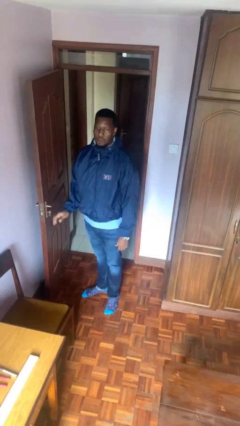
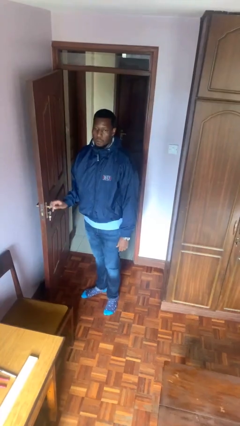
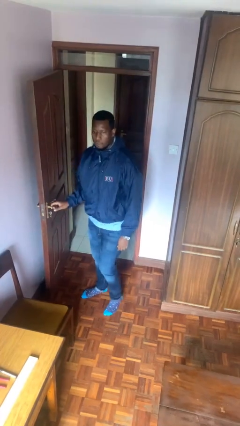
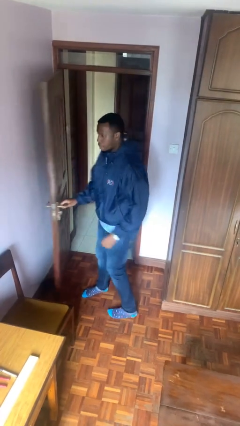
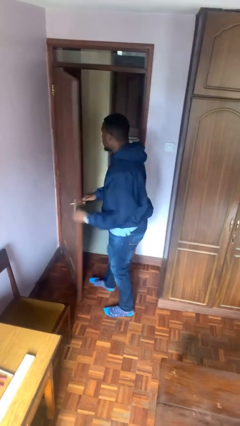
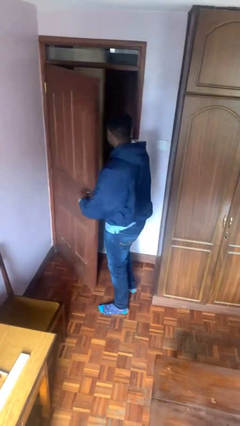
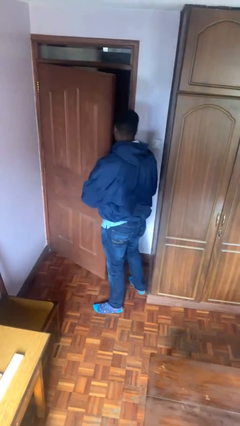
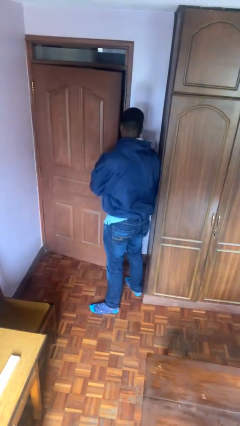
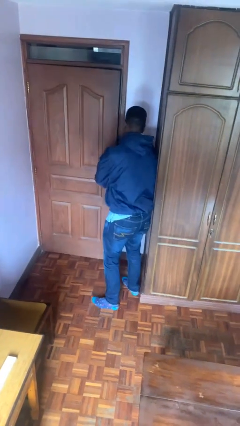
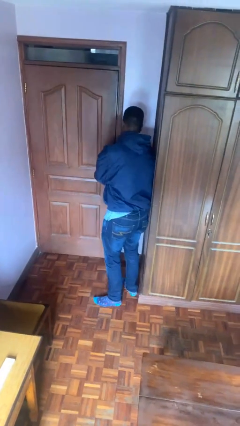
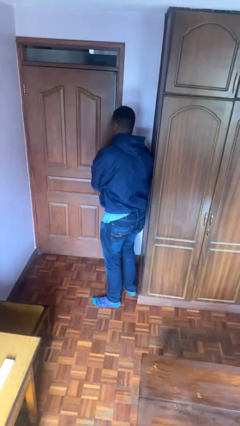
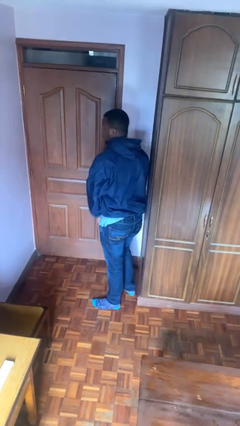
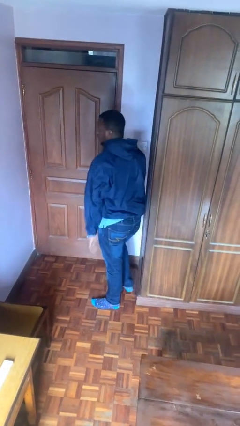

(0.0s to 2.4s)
person closes facility door

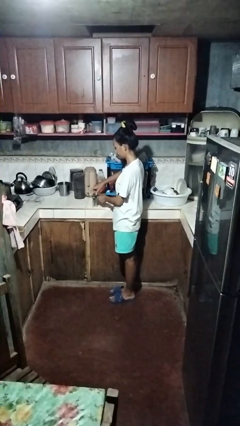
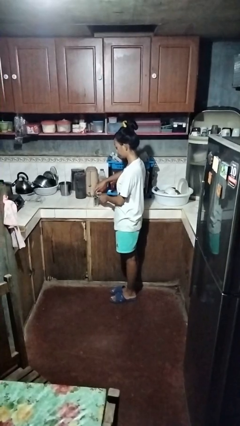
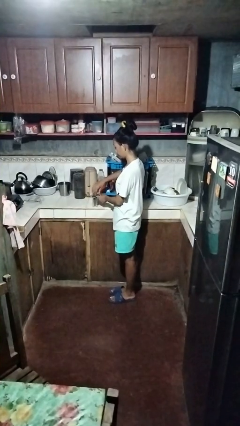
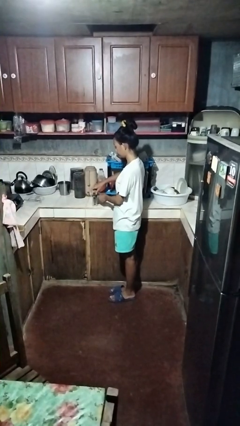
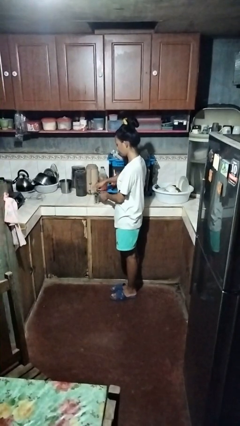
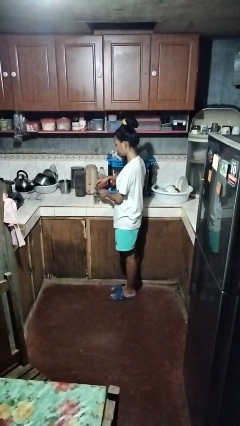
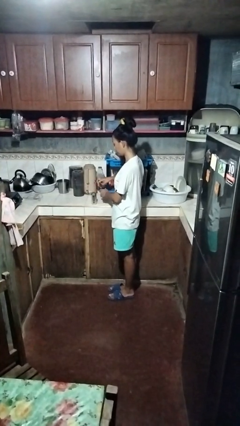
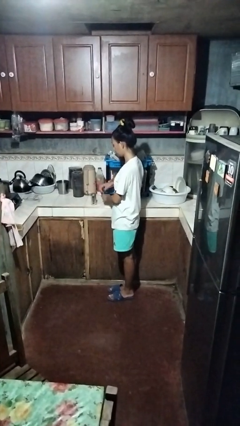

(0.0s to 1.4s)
person opens can with can opener

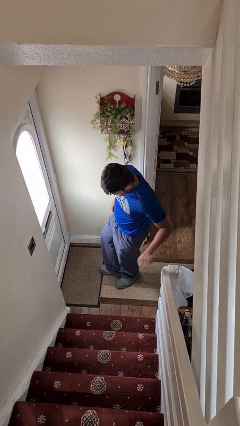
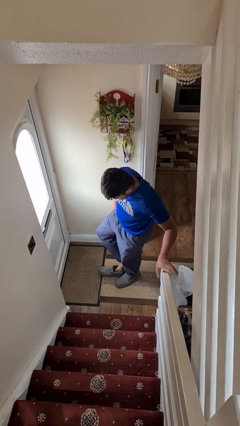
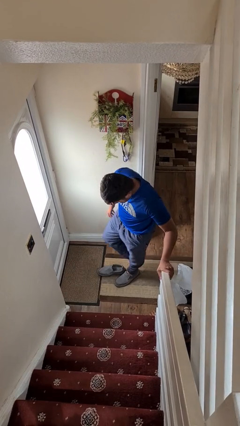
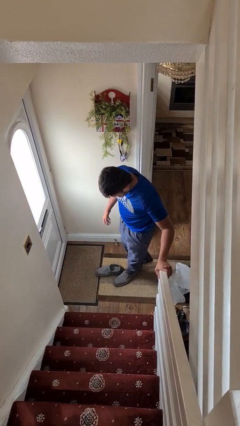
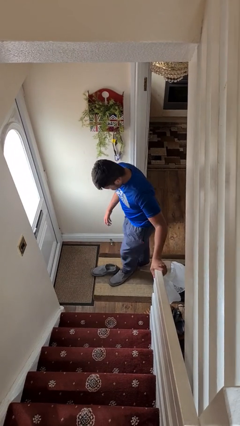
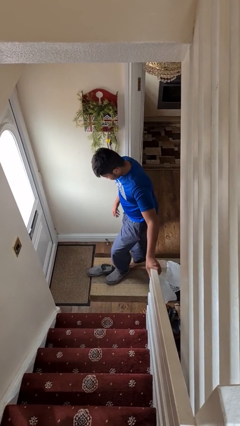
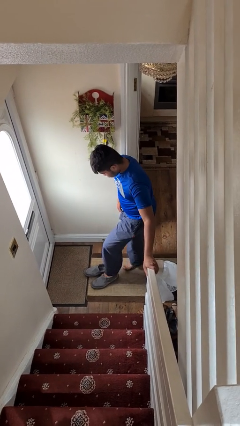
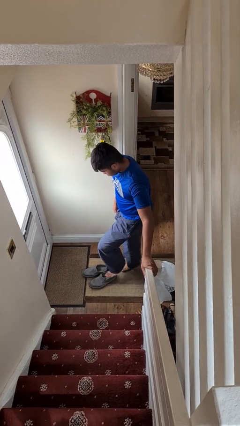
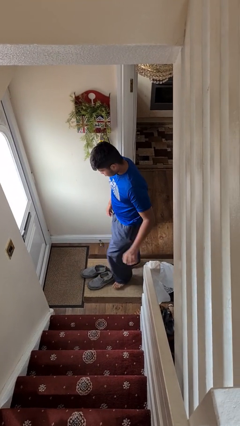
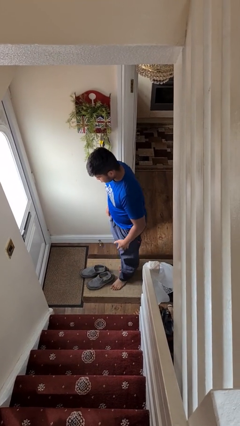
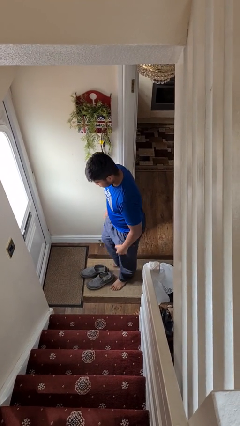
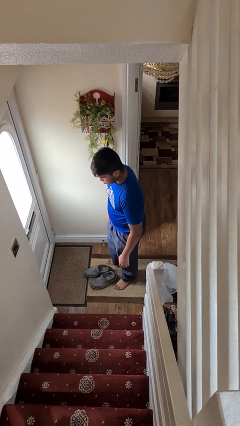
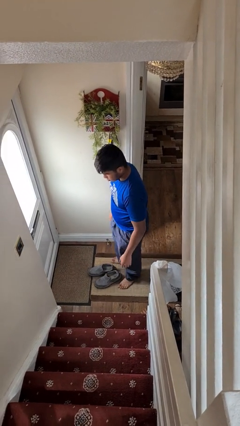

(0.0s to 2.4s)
person takes off shoes

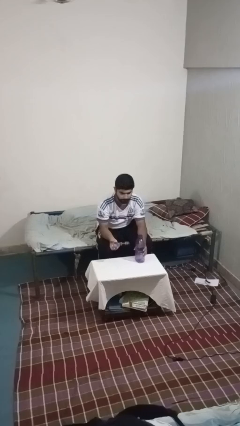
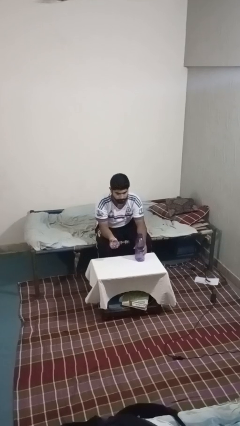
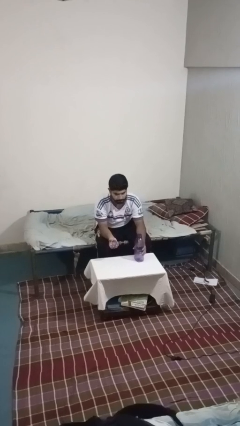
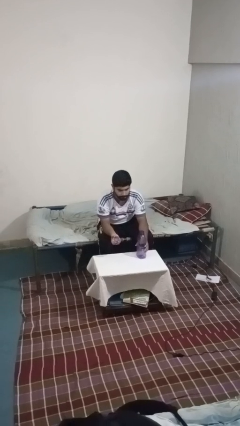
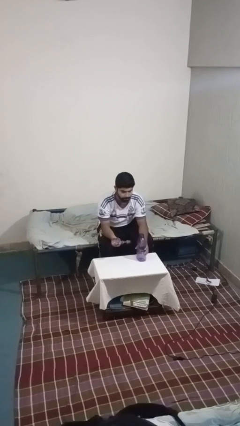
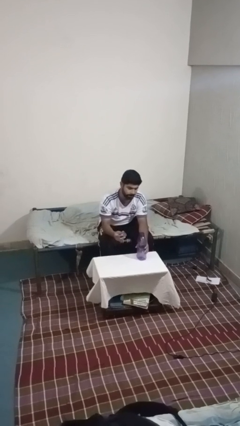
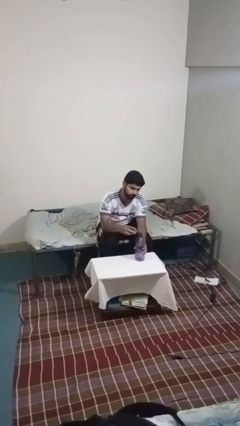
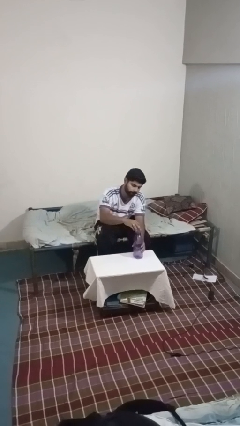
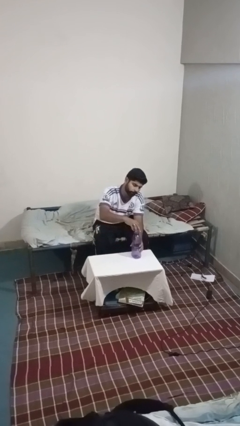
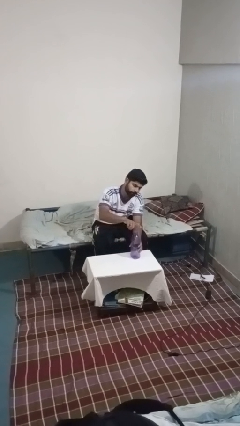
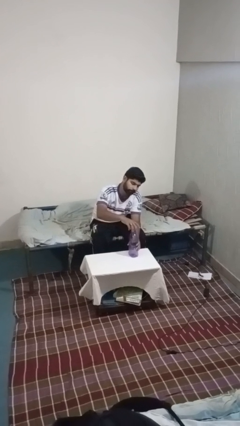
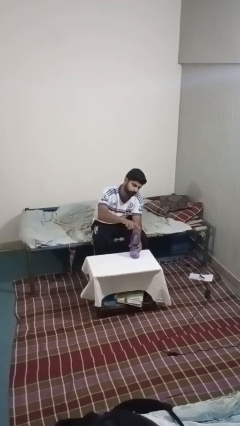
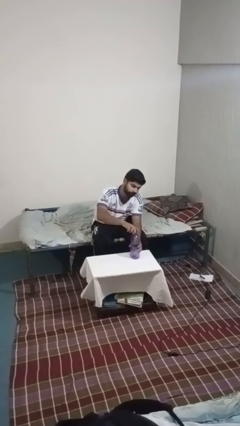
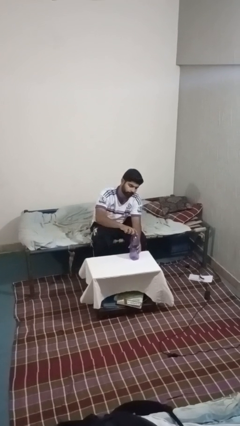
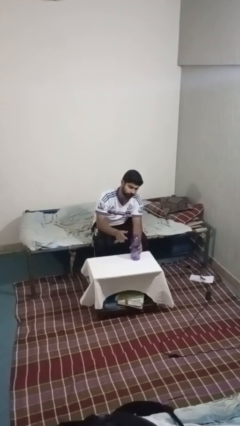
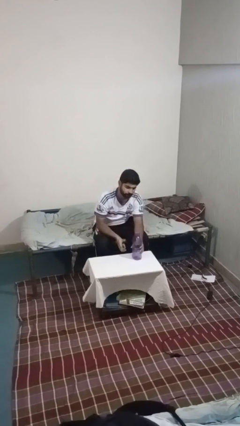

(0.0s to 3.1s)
person screws lid to bottle

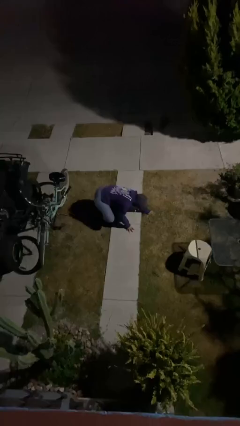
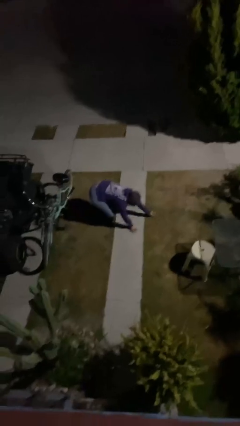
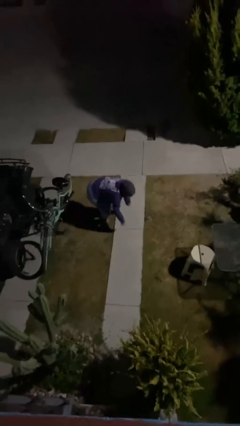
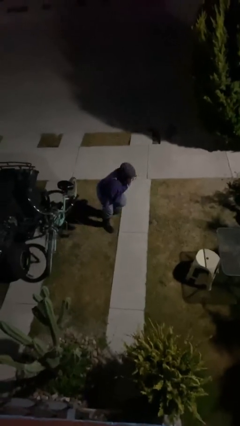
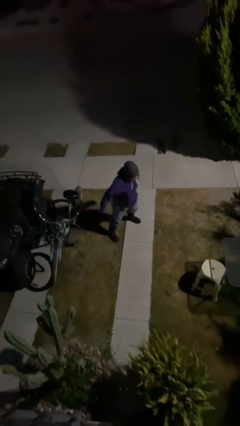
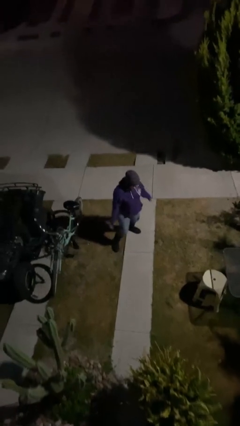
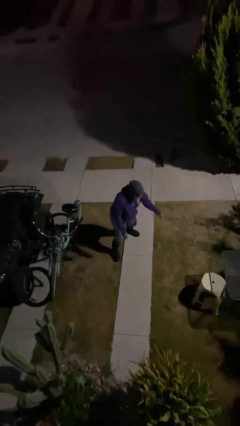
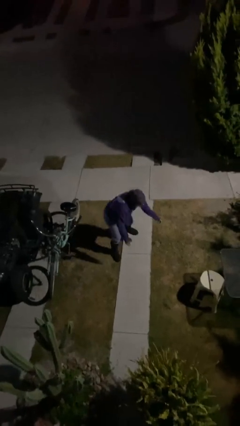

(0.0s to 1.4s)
person stands up

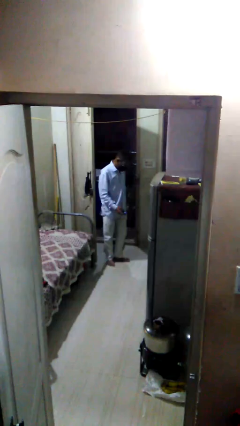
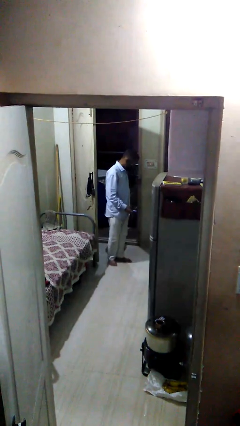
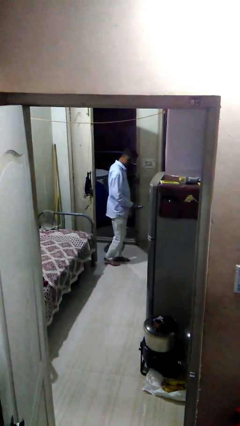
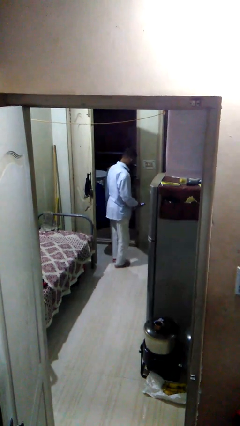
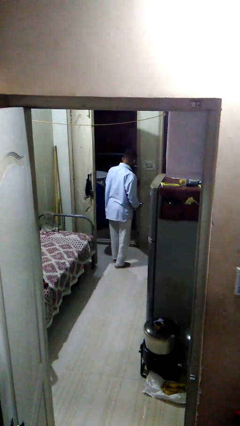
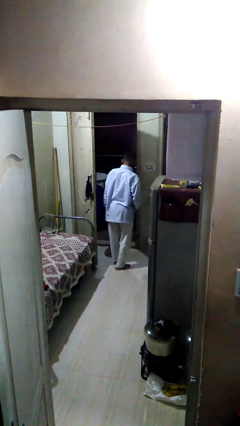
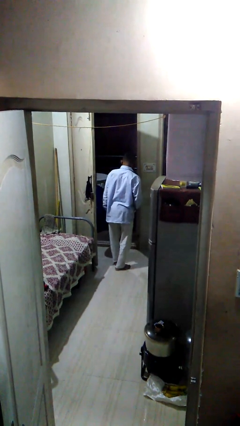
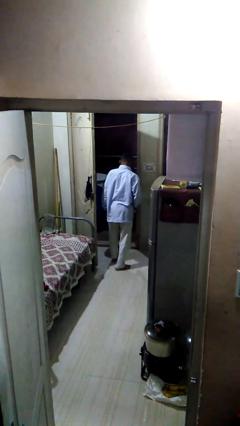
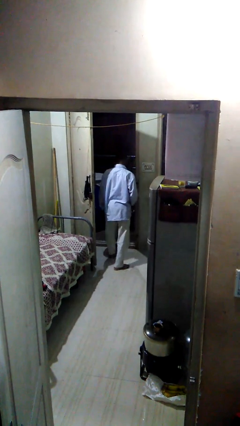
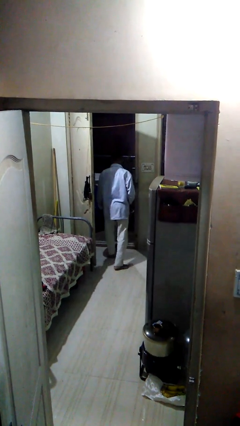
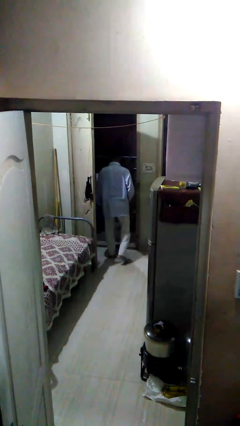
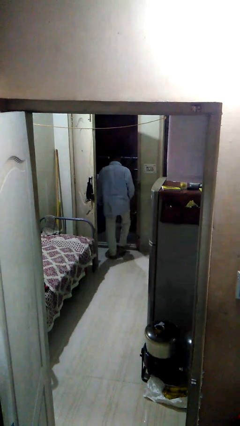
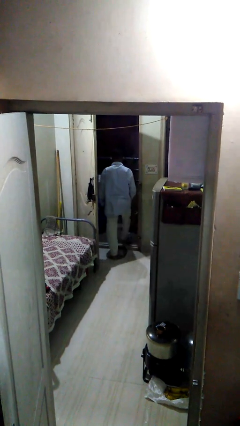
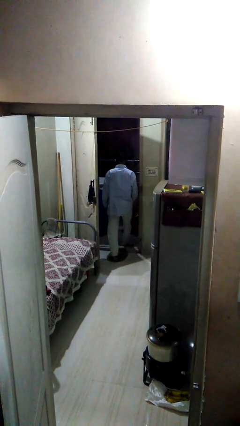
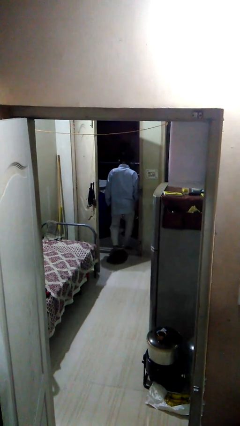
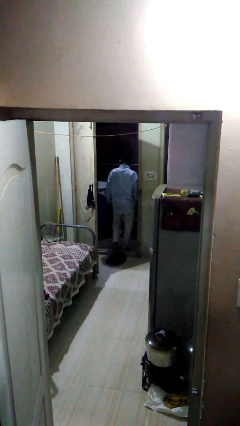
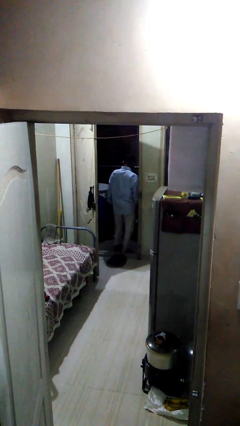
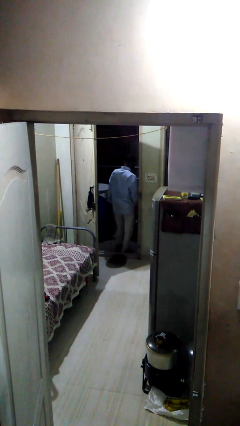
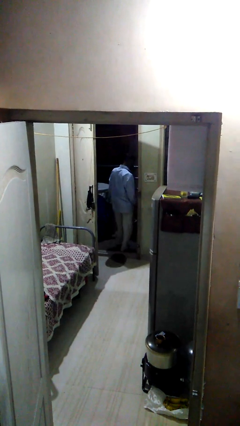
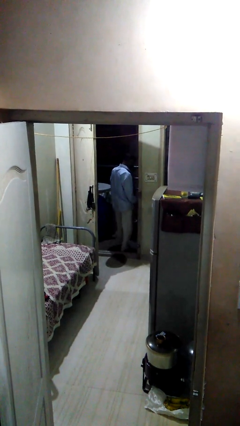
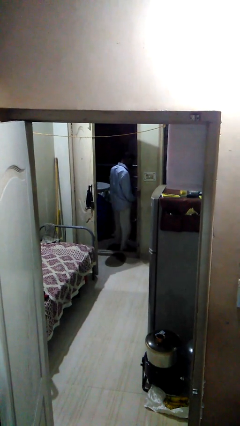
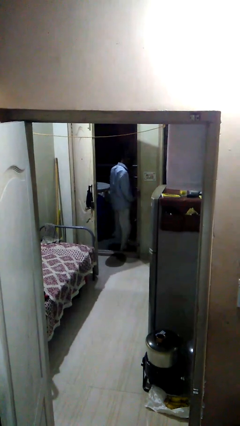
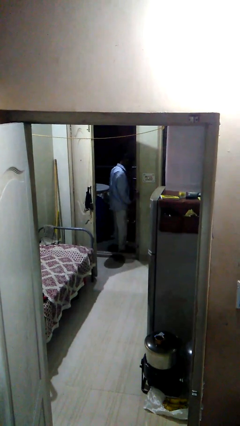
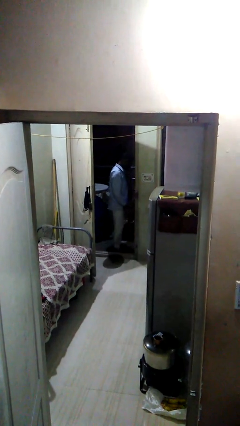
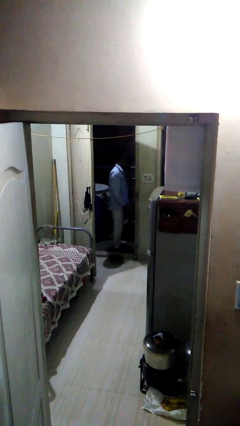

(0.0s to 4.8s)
person exits scene through structure

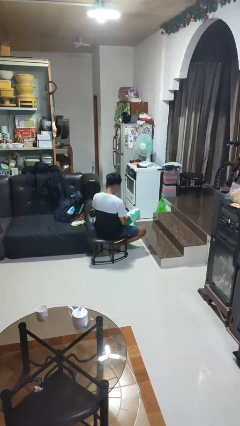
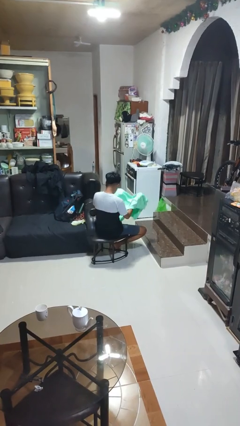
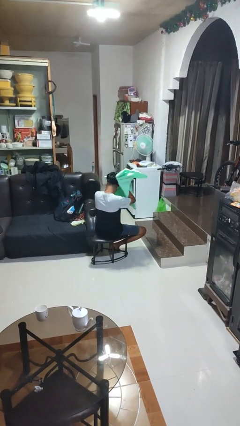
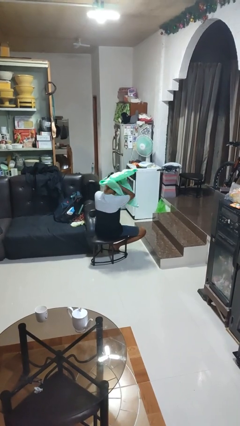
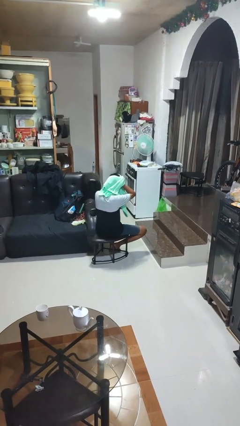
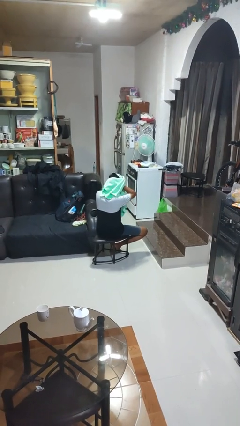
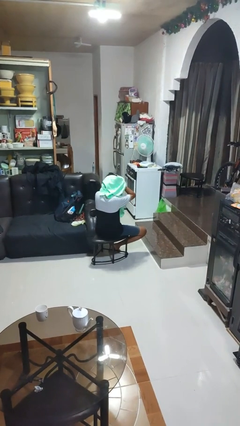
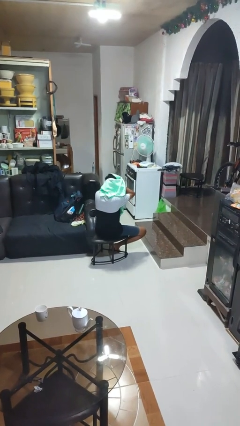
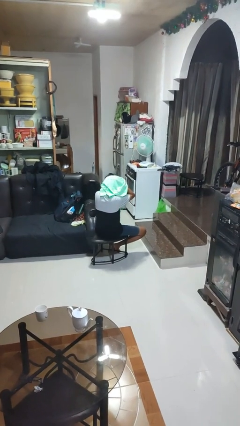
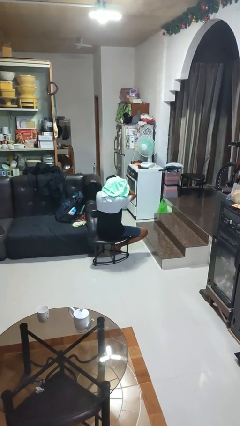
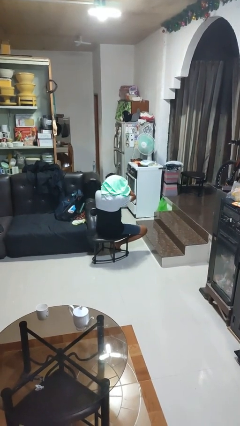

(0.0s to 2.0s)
person dries hair with towel
